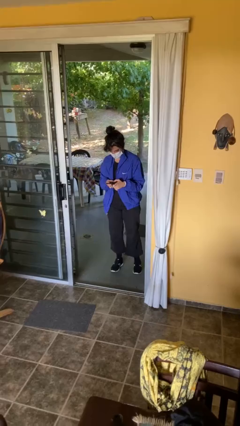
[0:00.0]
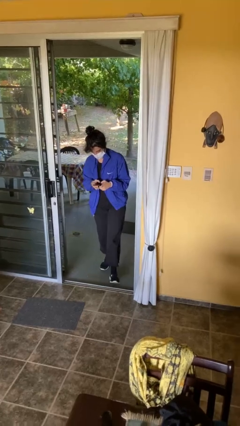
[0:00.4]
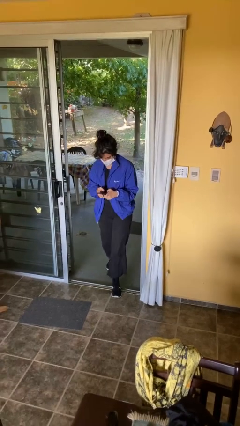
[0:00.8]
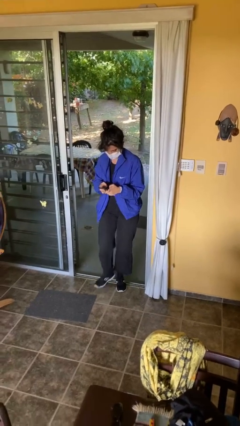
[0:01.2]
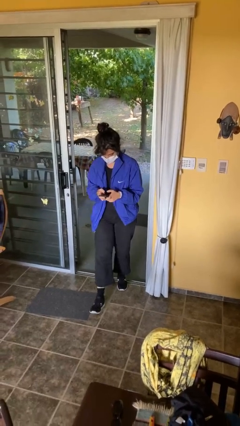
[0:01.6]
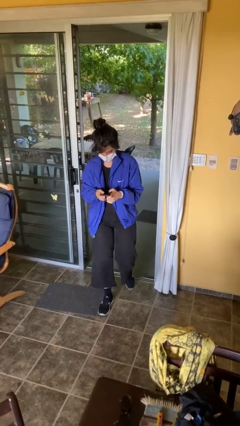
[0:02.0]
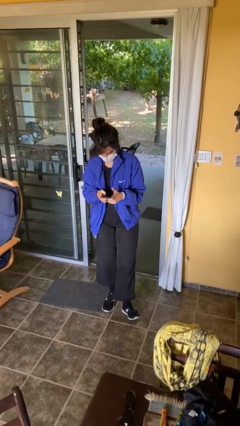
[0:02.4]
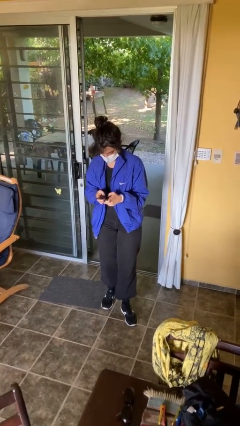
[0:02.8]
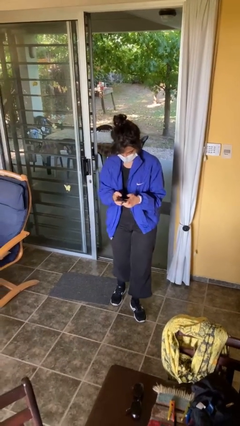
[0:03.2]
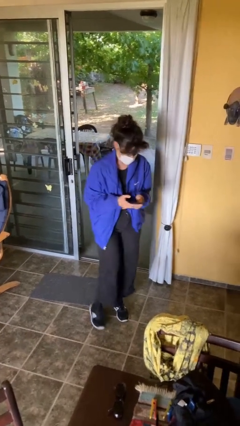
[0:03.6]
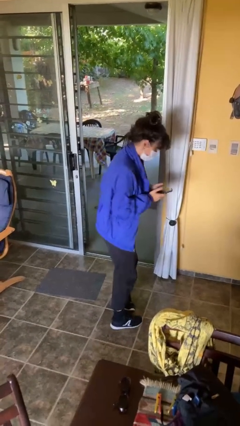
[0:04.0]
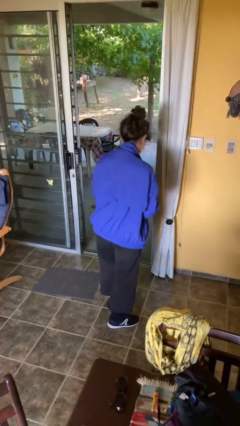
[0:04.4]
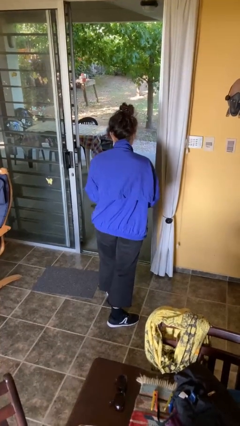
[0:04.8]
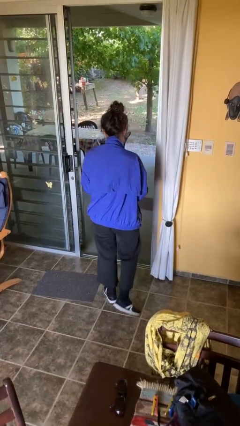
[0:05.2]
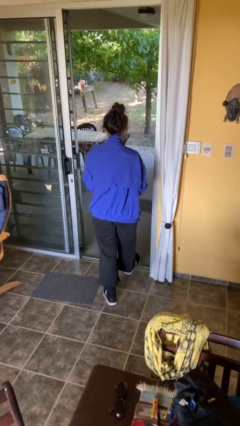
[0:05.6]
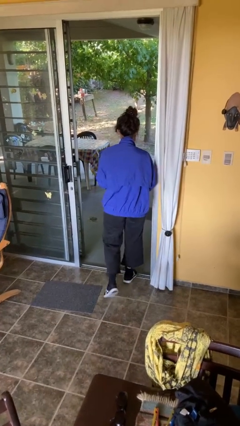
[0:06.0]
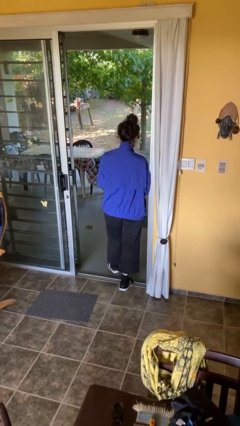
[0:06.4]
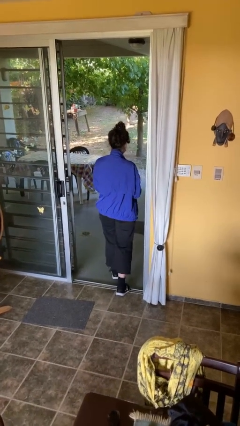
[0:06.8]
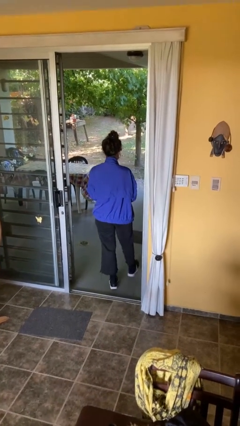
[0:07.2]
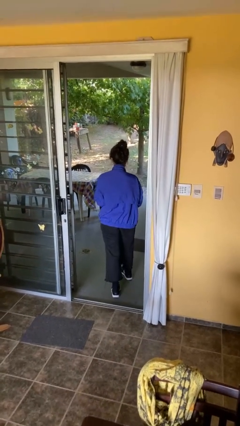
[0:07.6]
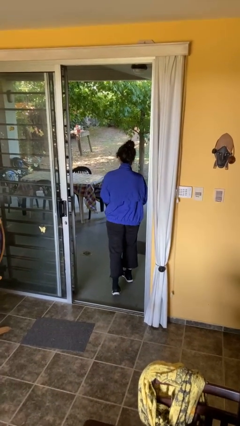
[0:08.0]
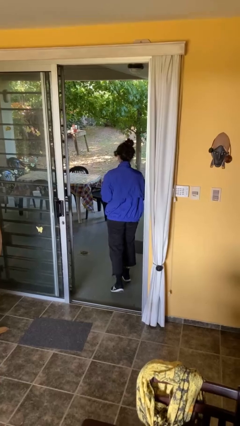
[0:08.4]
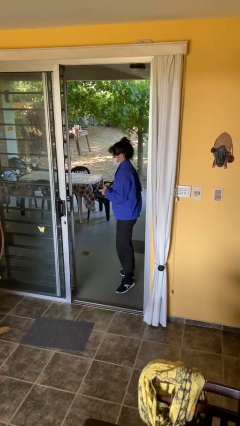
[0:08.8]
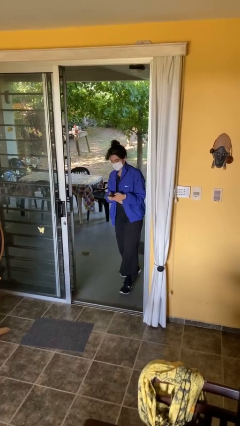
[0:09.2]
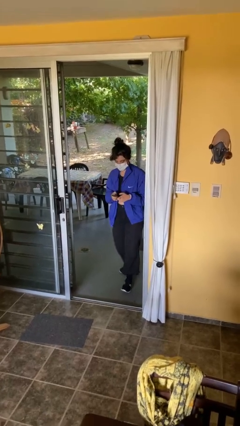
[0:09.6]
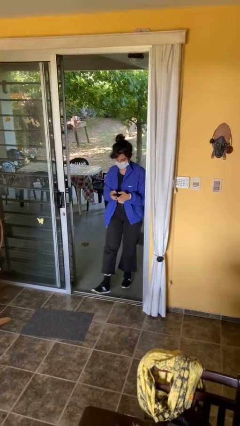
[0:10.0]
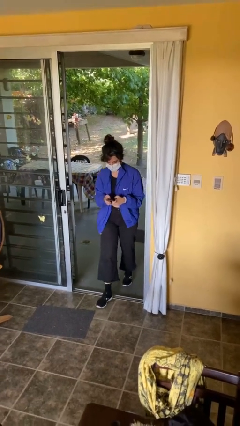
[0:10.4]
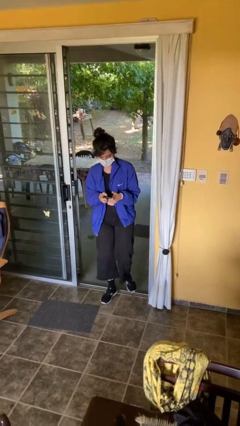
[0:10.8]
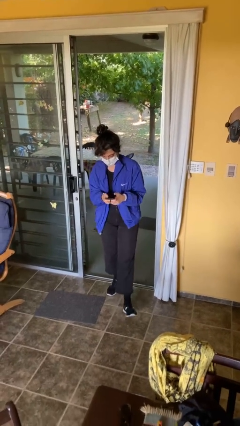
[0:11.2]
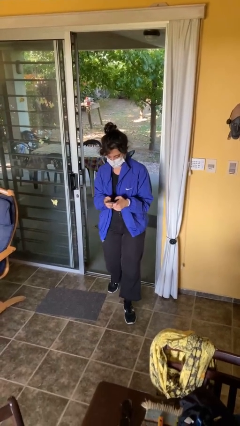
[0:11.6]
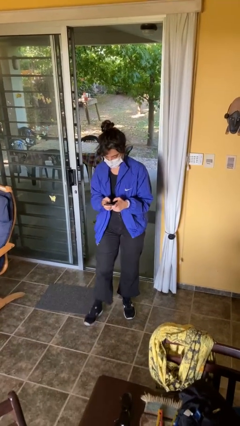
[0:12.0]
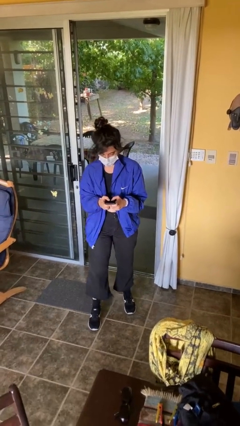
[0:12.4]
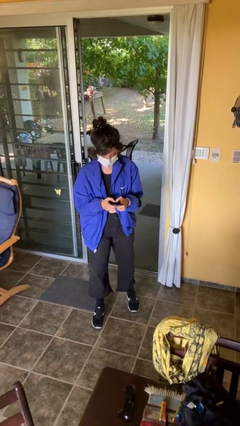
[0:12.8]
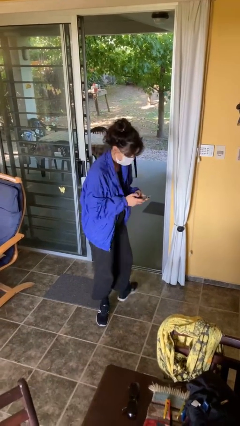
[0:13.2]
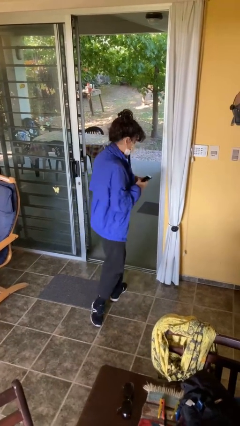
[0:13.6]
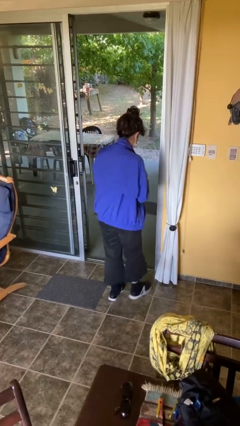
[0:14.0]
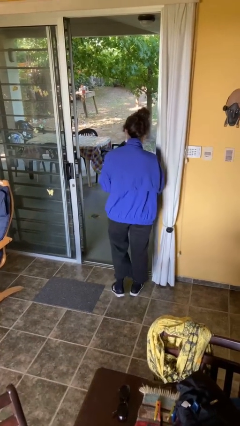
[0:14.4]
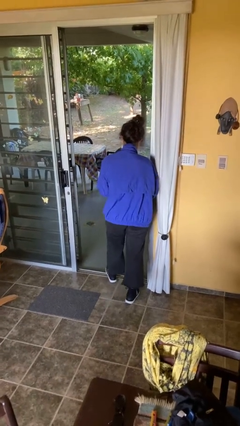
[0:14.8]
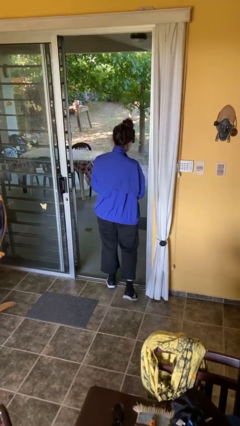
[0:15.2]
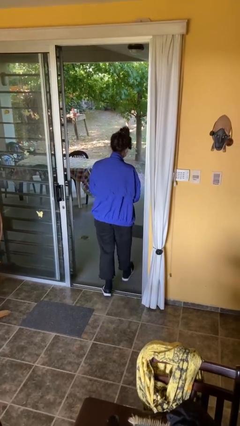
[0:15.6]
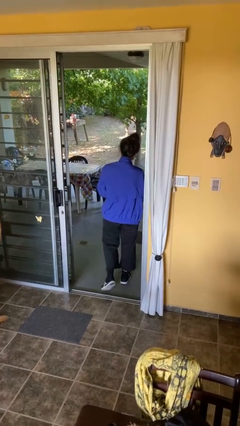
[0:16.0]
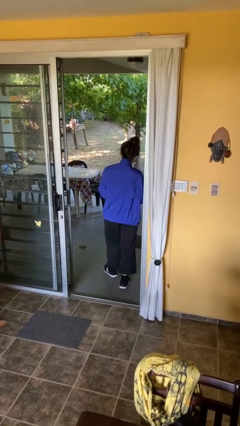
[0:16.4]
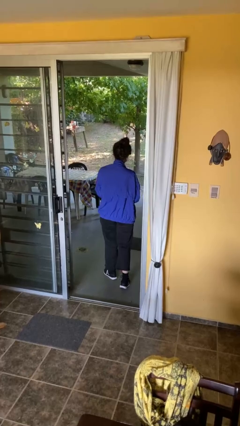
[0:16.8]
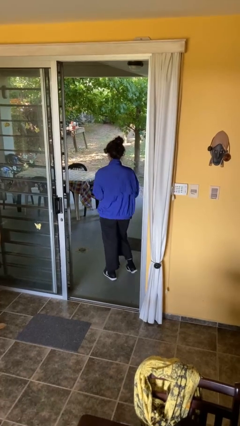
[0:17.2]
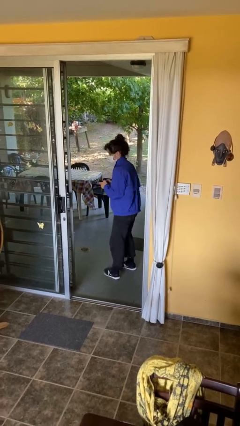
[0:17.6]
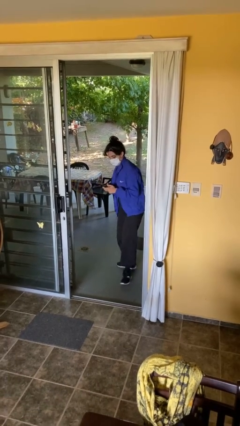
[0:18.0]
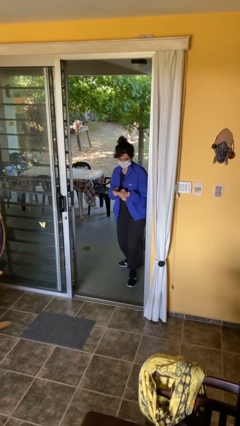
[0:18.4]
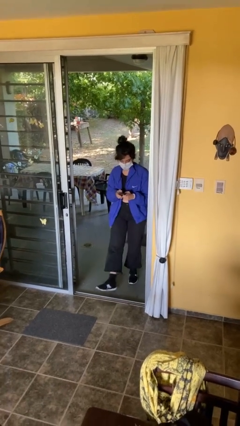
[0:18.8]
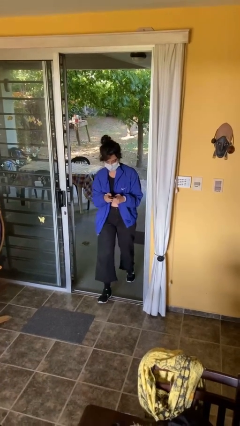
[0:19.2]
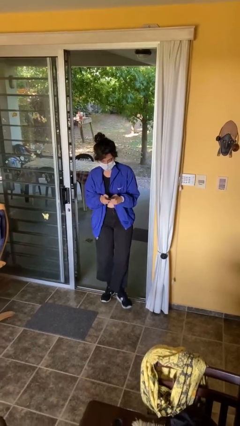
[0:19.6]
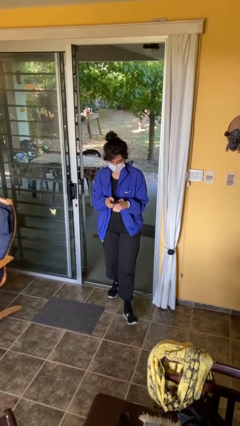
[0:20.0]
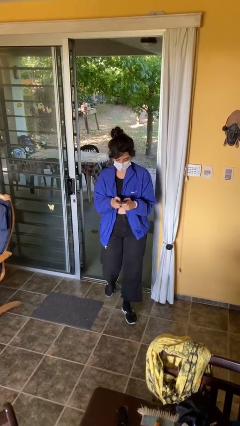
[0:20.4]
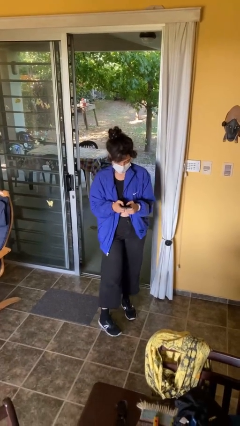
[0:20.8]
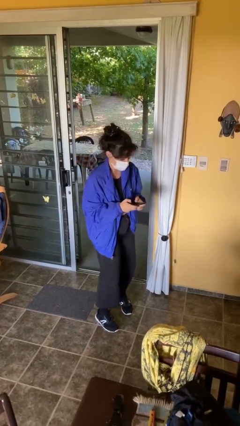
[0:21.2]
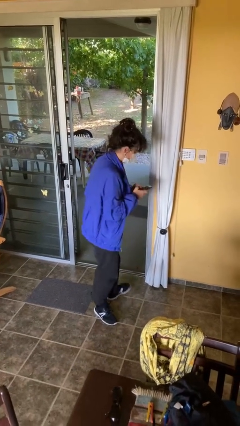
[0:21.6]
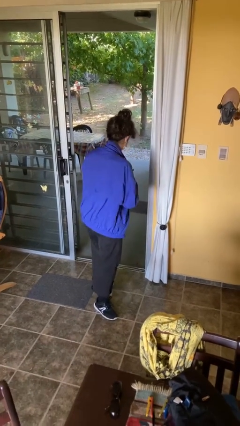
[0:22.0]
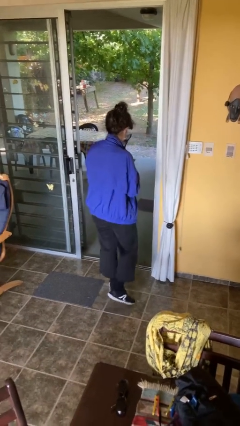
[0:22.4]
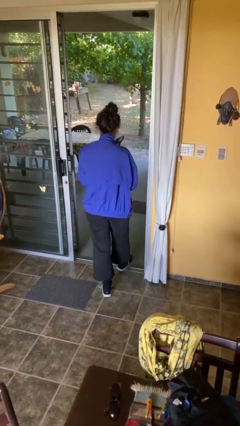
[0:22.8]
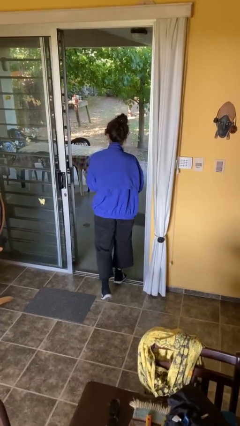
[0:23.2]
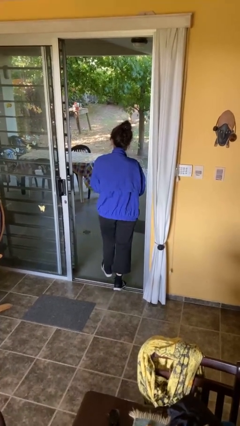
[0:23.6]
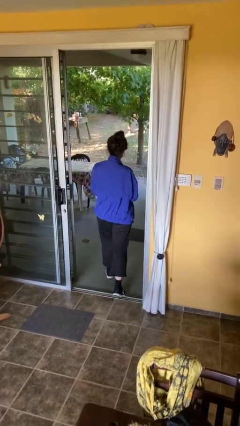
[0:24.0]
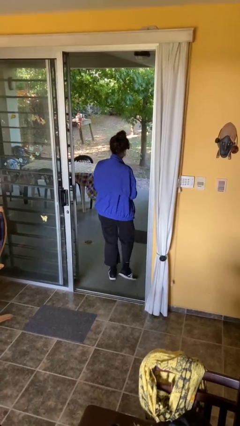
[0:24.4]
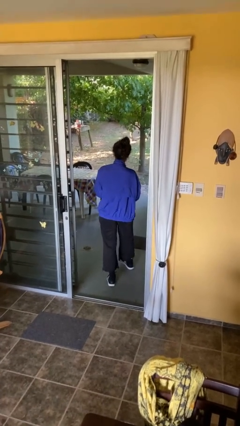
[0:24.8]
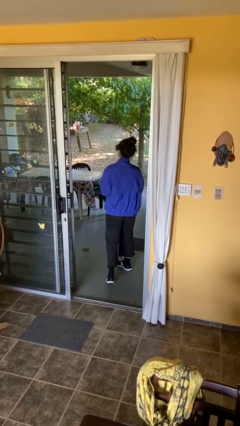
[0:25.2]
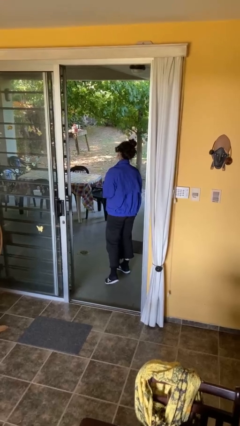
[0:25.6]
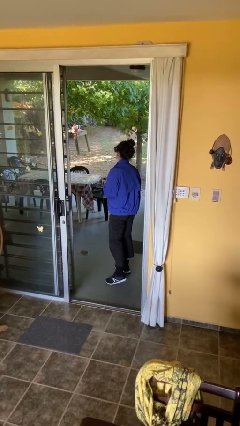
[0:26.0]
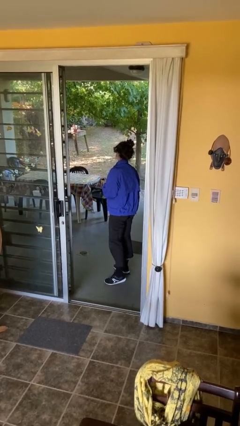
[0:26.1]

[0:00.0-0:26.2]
person texts on phone

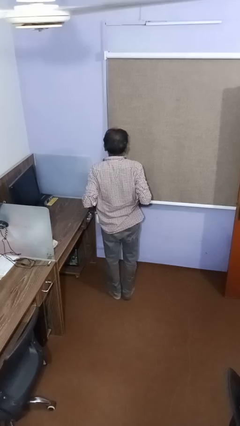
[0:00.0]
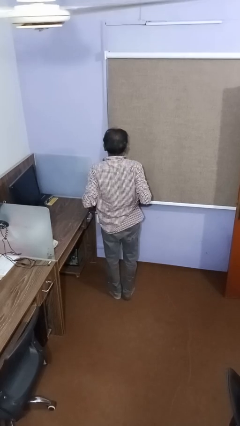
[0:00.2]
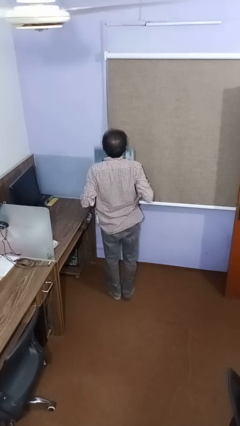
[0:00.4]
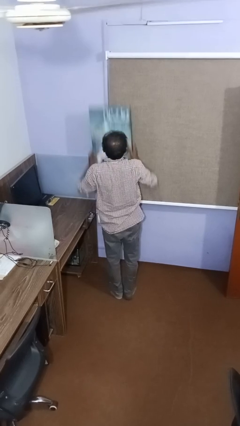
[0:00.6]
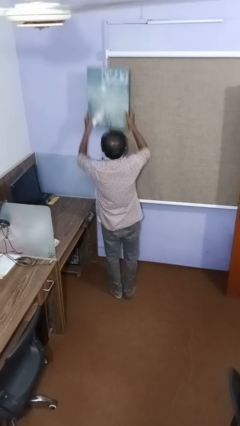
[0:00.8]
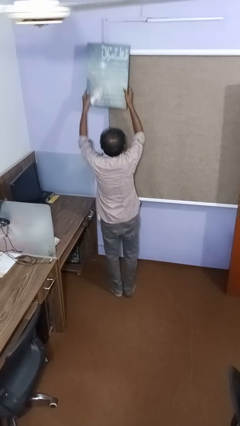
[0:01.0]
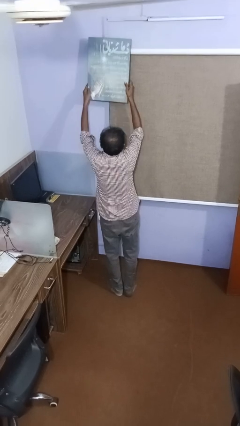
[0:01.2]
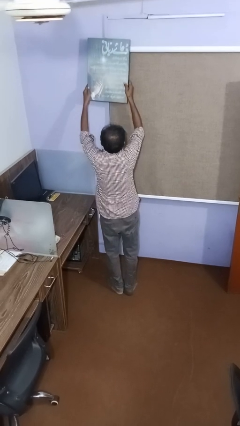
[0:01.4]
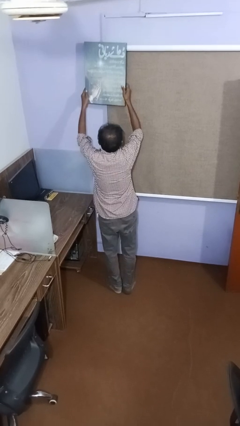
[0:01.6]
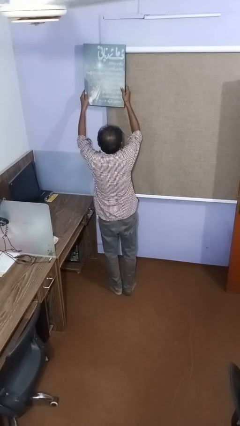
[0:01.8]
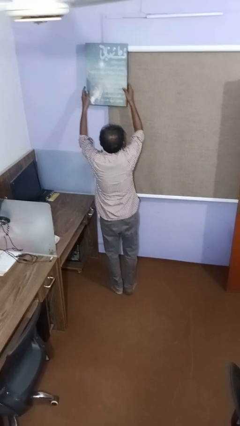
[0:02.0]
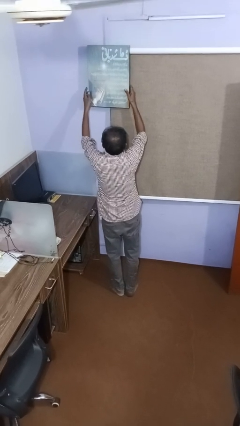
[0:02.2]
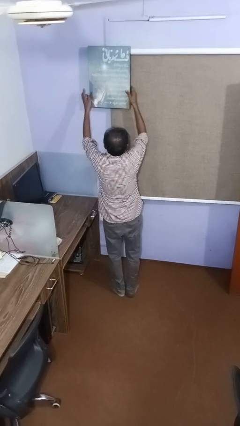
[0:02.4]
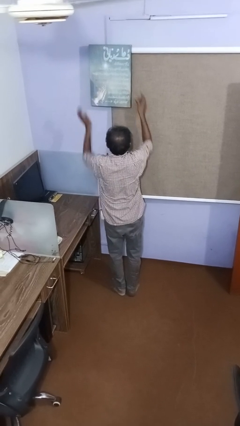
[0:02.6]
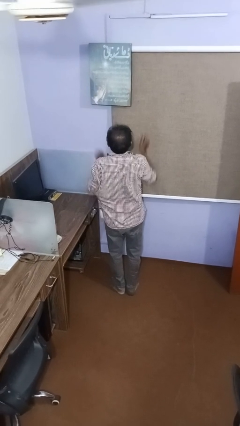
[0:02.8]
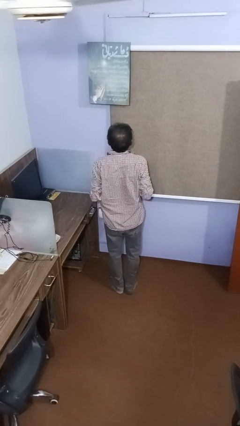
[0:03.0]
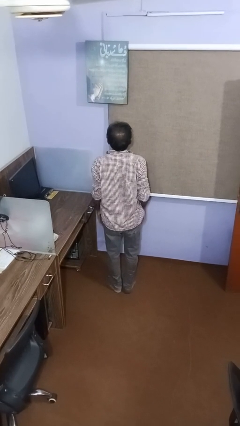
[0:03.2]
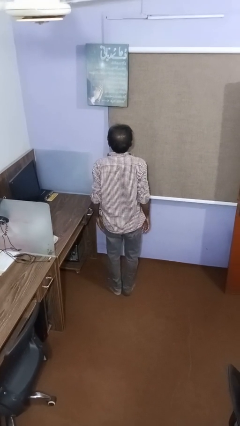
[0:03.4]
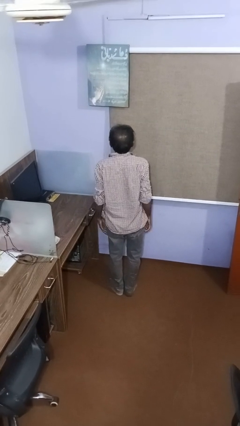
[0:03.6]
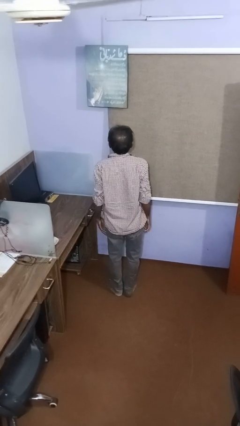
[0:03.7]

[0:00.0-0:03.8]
person puts up picture frame

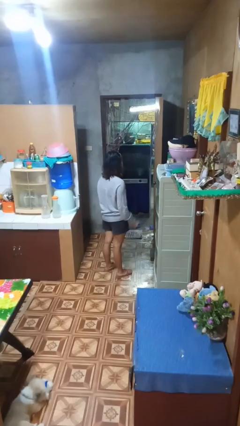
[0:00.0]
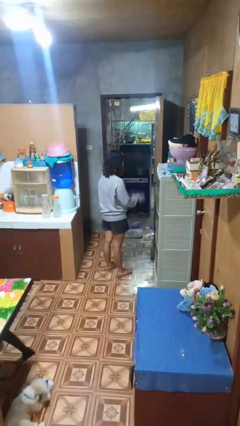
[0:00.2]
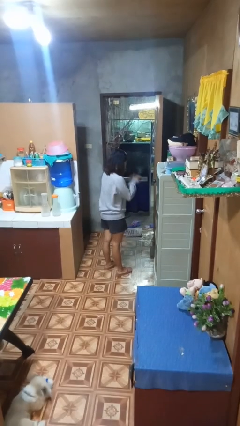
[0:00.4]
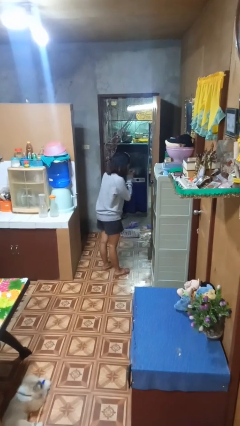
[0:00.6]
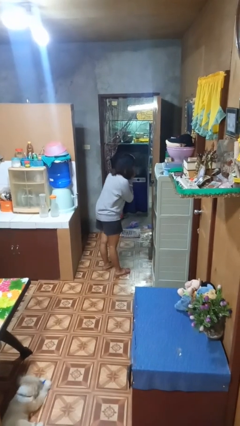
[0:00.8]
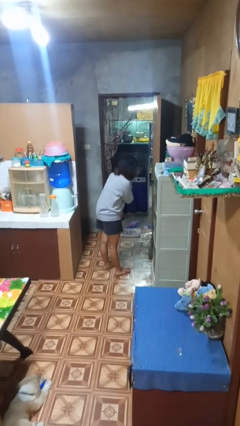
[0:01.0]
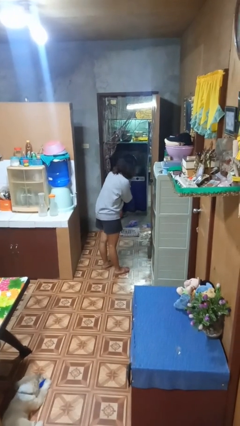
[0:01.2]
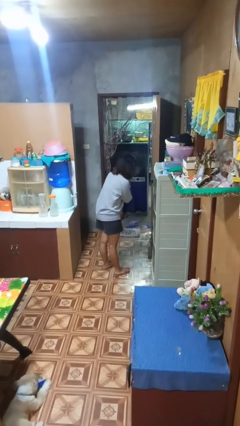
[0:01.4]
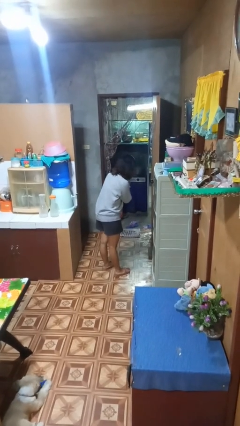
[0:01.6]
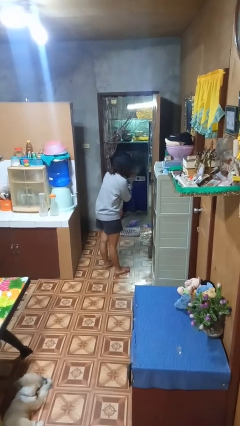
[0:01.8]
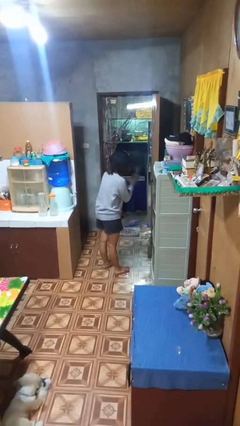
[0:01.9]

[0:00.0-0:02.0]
person blows nose
